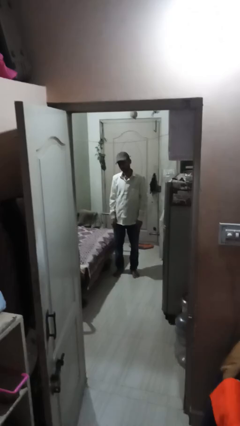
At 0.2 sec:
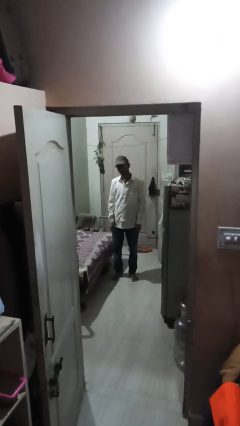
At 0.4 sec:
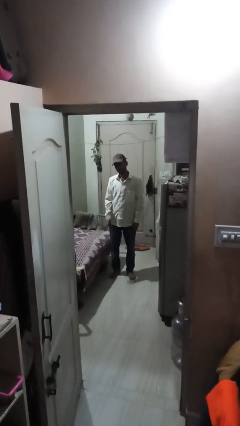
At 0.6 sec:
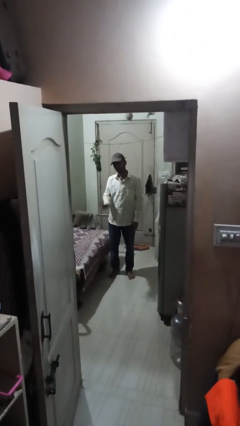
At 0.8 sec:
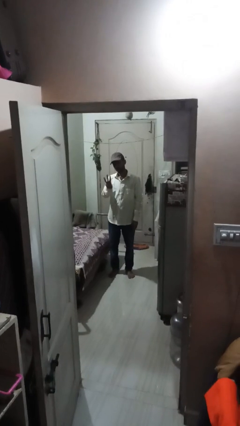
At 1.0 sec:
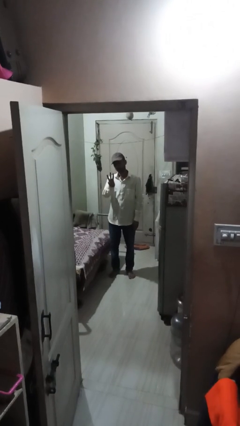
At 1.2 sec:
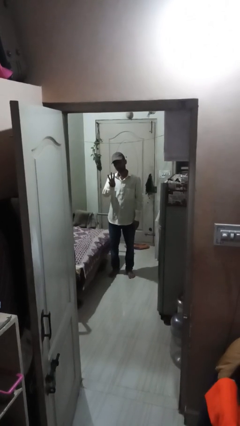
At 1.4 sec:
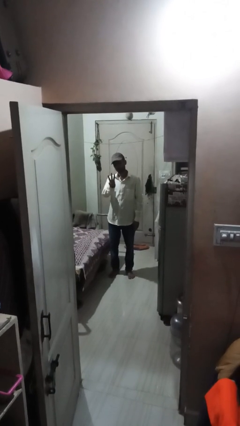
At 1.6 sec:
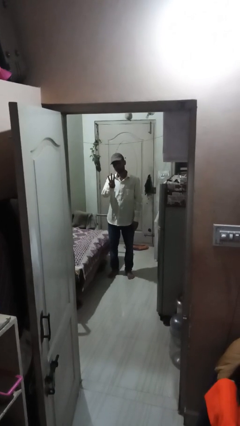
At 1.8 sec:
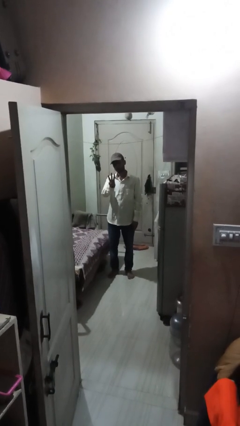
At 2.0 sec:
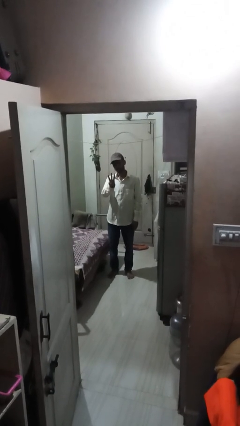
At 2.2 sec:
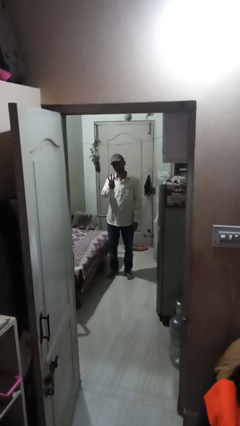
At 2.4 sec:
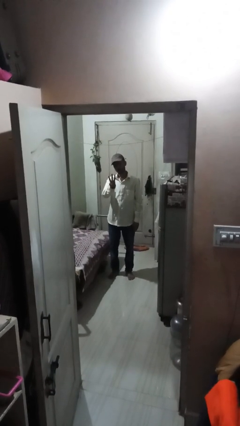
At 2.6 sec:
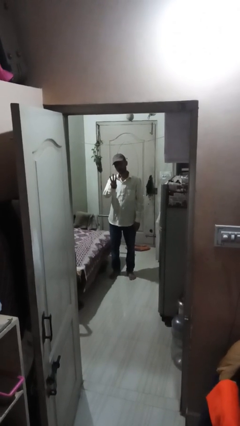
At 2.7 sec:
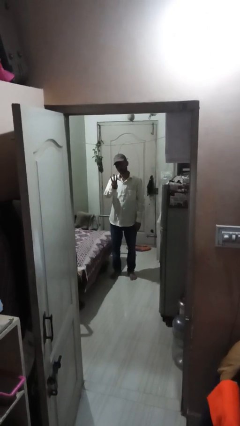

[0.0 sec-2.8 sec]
person gestures number three

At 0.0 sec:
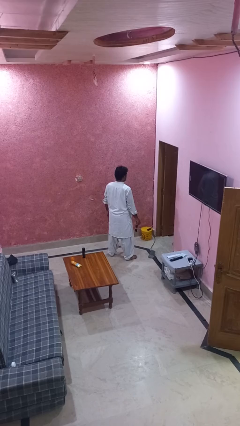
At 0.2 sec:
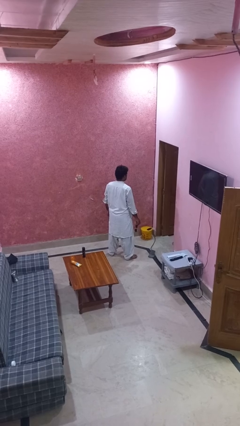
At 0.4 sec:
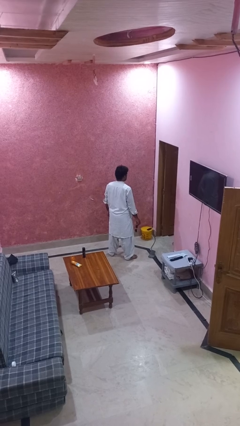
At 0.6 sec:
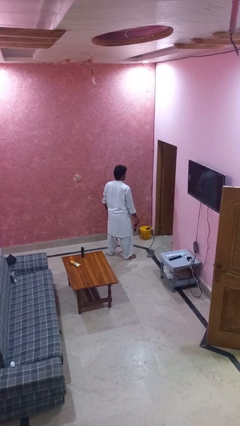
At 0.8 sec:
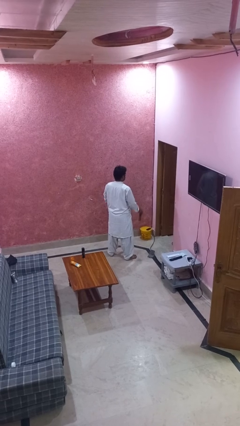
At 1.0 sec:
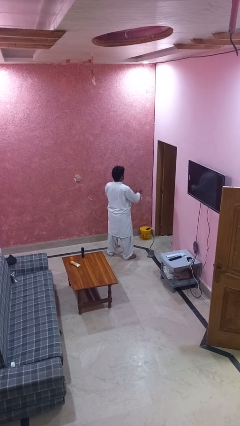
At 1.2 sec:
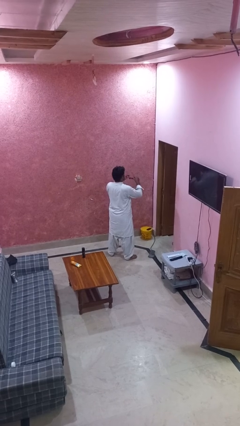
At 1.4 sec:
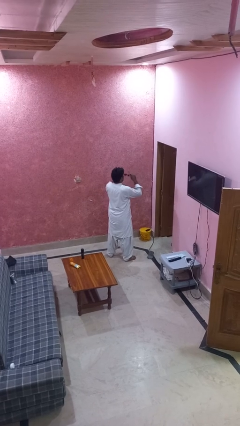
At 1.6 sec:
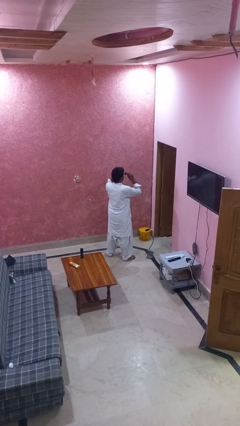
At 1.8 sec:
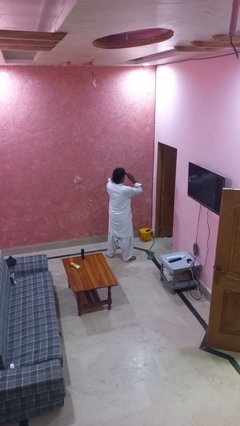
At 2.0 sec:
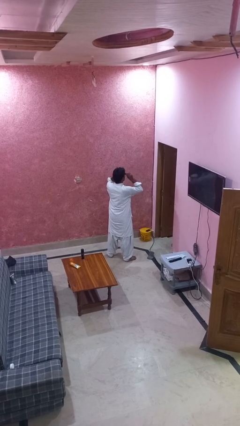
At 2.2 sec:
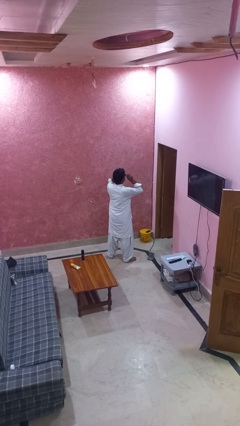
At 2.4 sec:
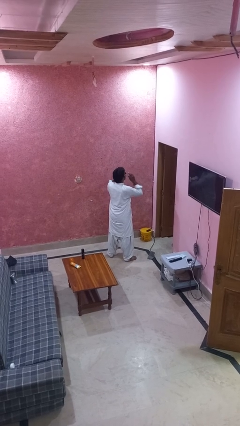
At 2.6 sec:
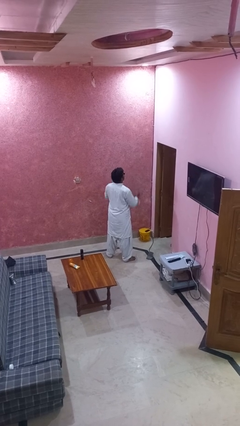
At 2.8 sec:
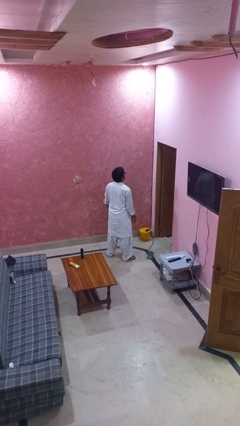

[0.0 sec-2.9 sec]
person puts on sunglasses

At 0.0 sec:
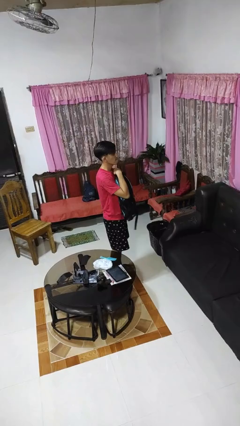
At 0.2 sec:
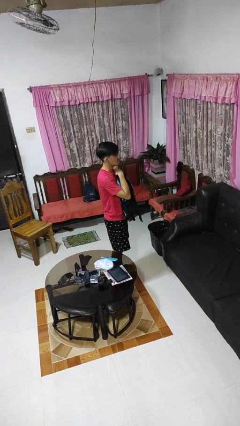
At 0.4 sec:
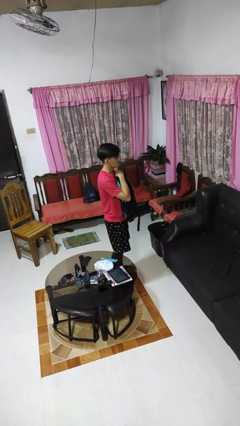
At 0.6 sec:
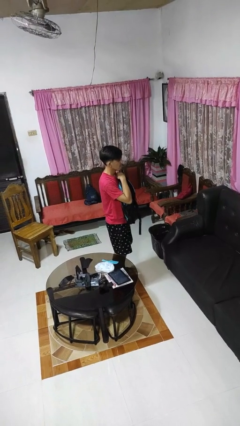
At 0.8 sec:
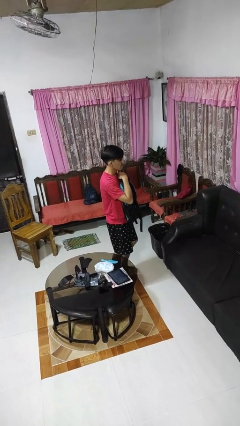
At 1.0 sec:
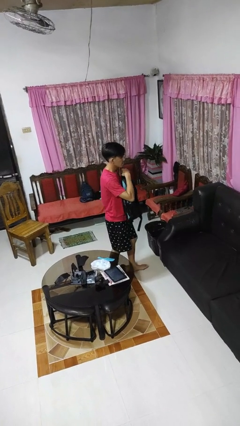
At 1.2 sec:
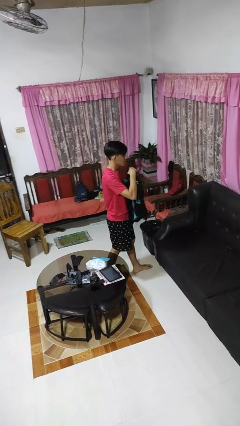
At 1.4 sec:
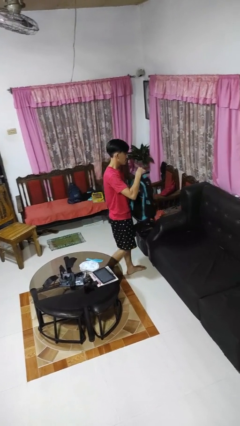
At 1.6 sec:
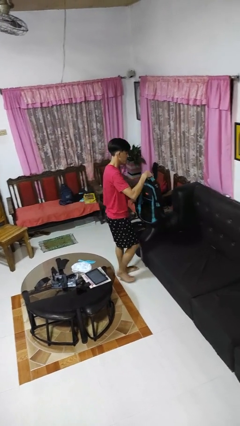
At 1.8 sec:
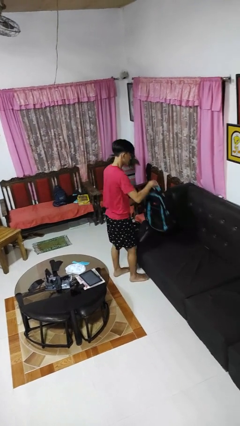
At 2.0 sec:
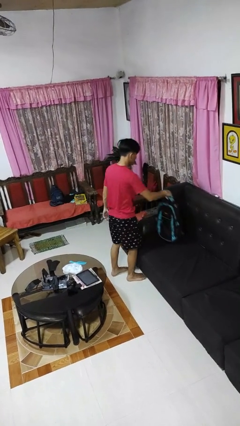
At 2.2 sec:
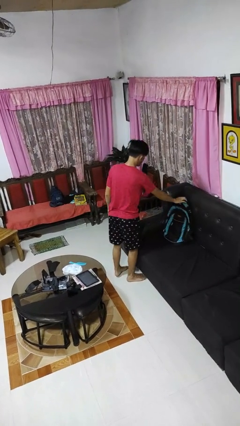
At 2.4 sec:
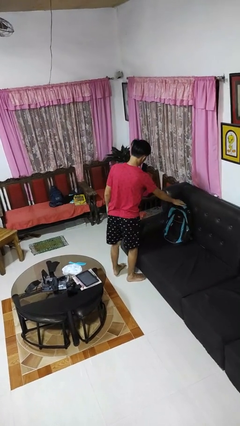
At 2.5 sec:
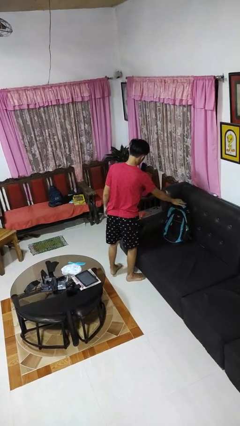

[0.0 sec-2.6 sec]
person puts down object on couch

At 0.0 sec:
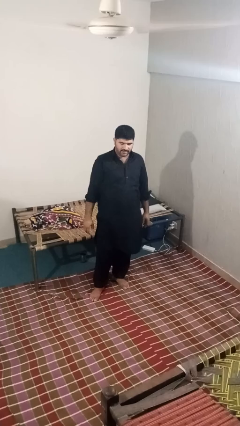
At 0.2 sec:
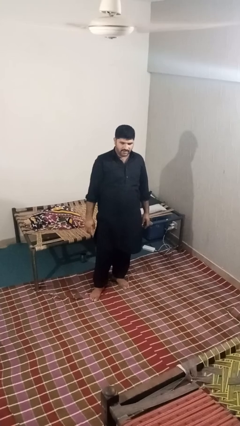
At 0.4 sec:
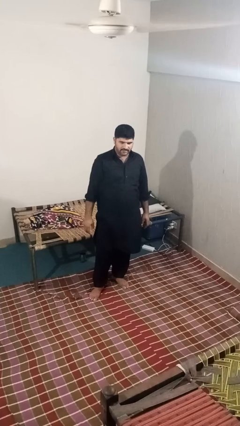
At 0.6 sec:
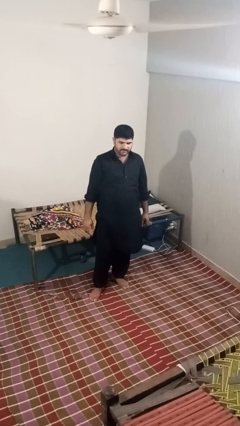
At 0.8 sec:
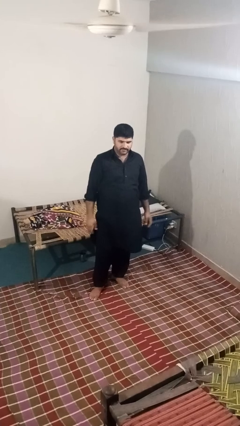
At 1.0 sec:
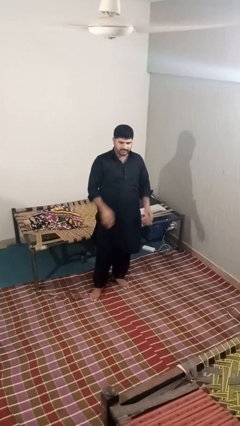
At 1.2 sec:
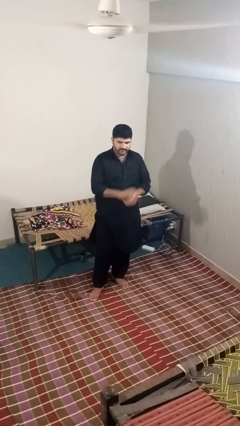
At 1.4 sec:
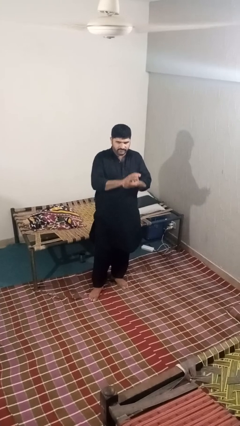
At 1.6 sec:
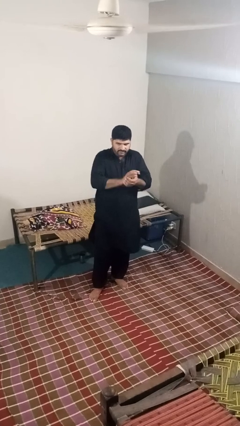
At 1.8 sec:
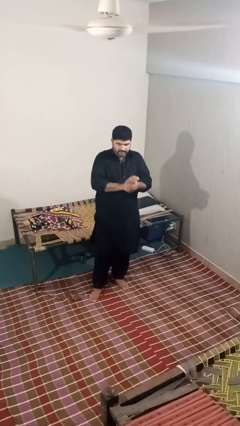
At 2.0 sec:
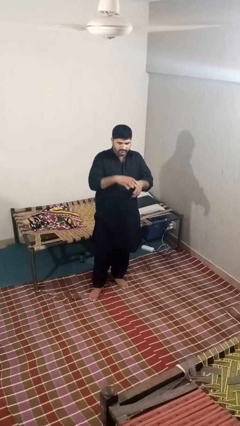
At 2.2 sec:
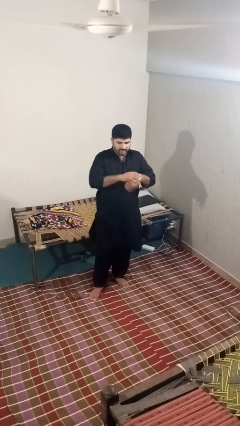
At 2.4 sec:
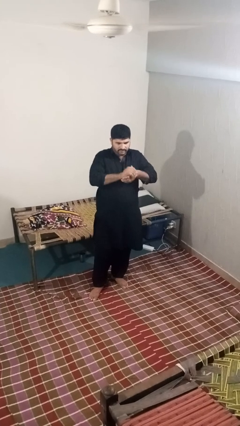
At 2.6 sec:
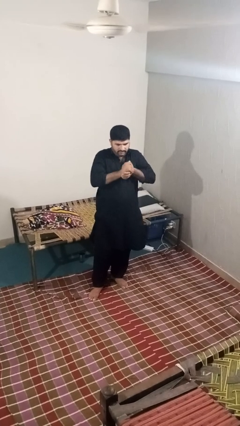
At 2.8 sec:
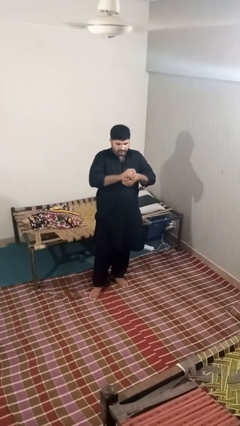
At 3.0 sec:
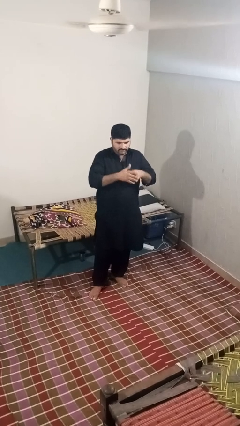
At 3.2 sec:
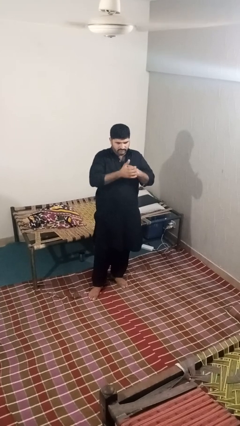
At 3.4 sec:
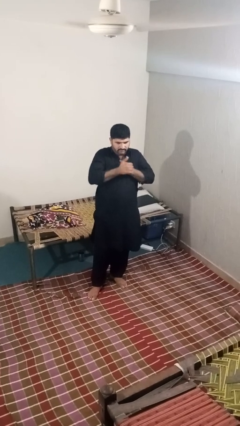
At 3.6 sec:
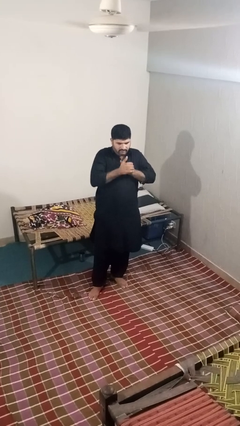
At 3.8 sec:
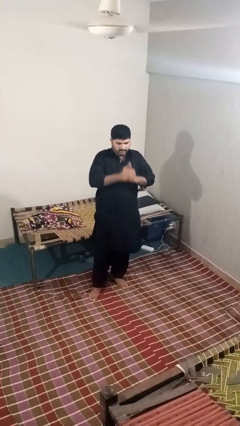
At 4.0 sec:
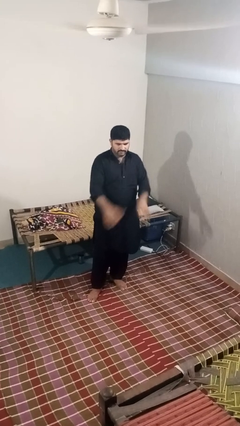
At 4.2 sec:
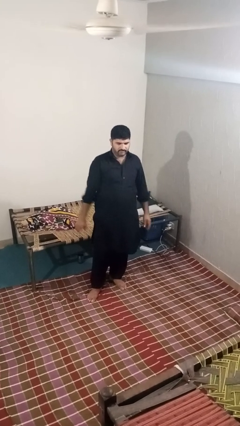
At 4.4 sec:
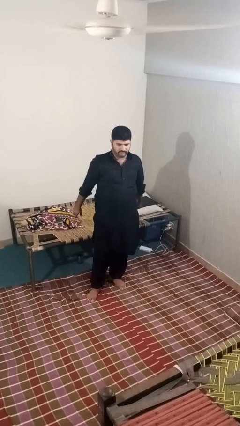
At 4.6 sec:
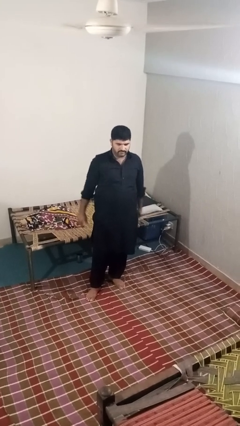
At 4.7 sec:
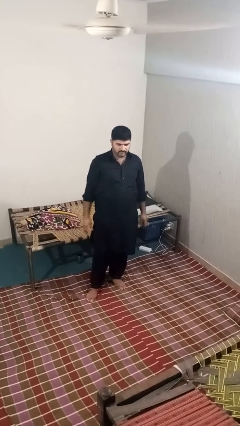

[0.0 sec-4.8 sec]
person cracks knuckles

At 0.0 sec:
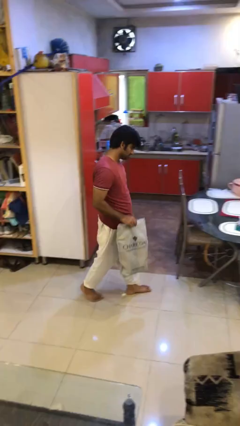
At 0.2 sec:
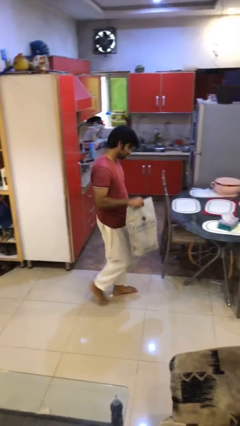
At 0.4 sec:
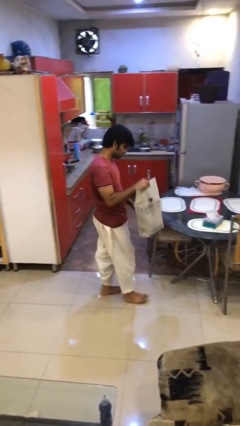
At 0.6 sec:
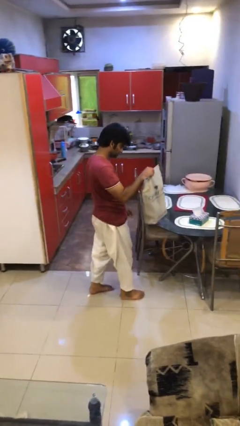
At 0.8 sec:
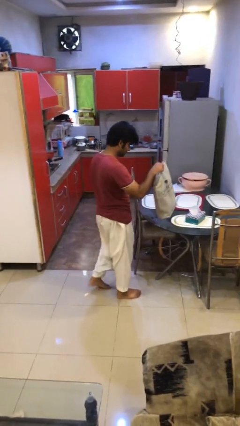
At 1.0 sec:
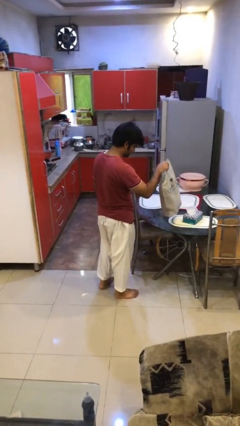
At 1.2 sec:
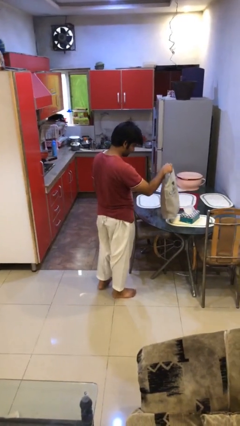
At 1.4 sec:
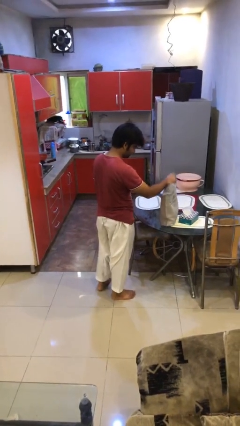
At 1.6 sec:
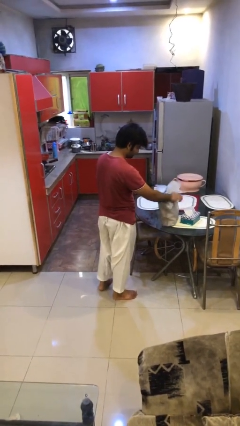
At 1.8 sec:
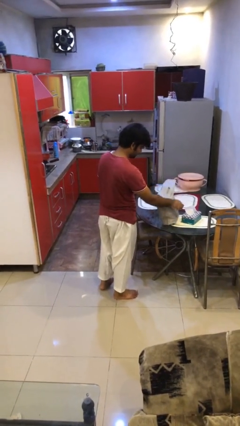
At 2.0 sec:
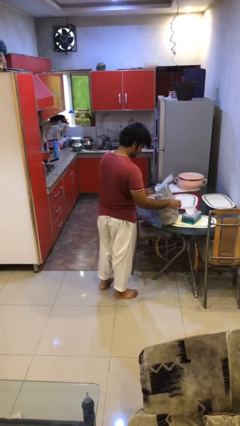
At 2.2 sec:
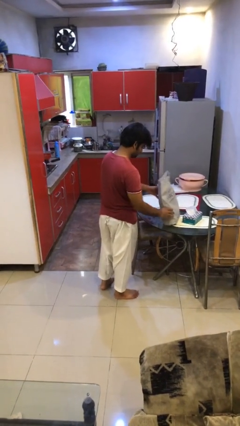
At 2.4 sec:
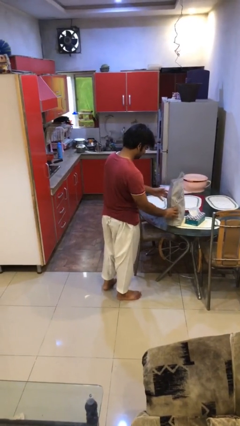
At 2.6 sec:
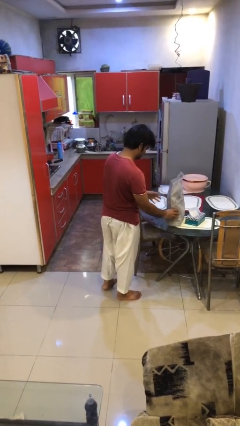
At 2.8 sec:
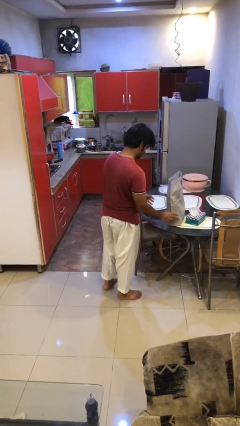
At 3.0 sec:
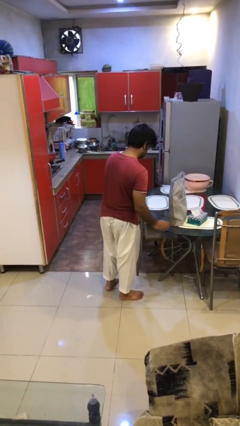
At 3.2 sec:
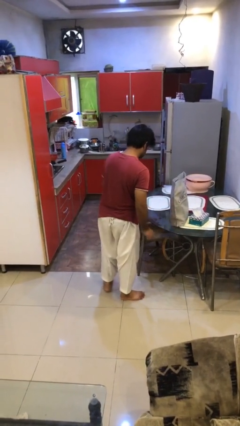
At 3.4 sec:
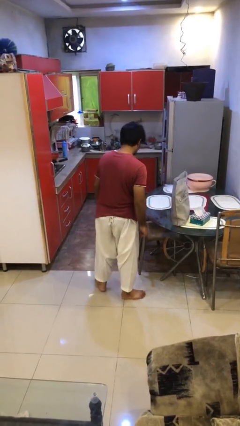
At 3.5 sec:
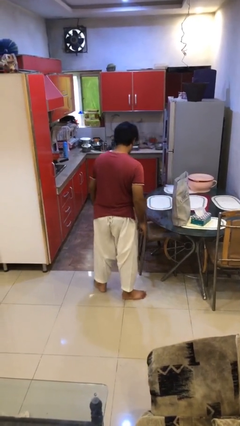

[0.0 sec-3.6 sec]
person puts down object on table

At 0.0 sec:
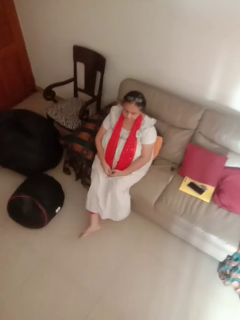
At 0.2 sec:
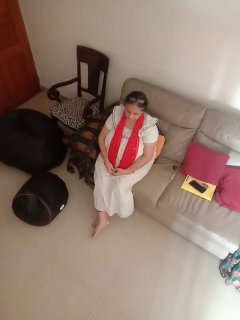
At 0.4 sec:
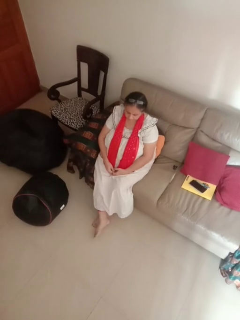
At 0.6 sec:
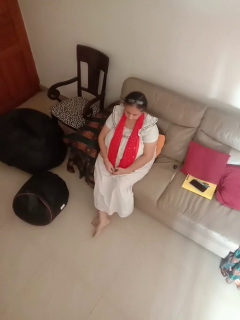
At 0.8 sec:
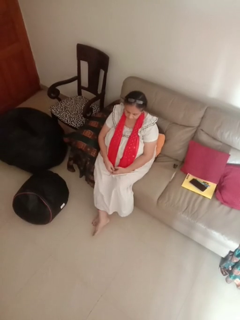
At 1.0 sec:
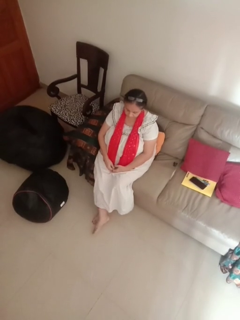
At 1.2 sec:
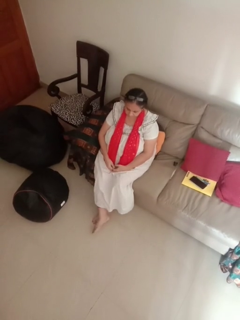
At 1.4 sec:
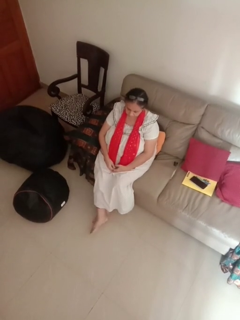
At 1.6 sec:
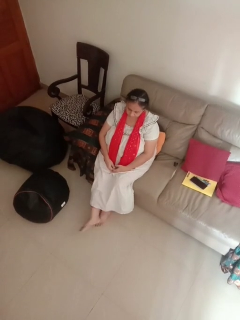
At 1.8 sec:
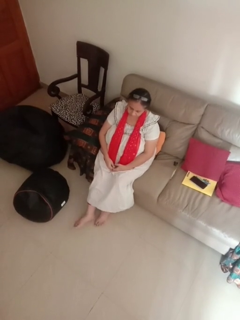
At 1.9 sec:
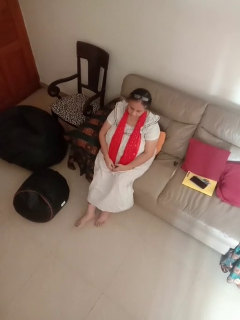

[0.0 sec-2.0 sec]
person crosses legs
